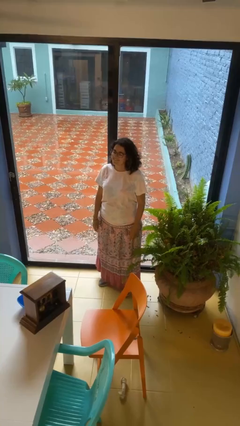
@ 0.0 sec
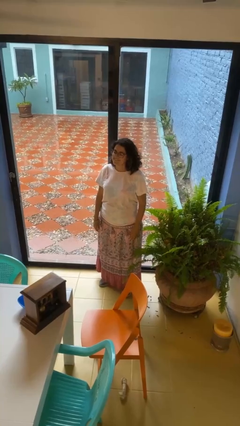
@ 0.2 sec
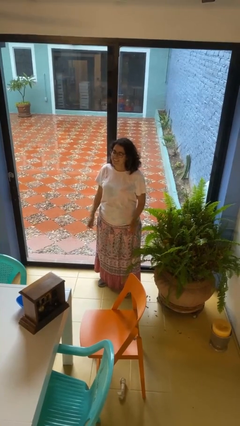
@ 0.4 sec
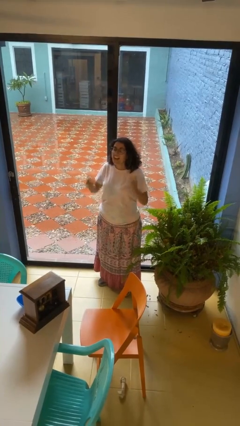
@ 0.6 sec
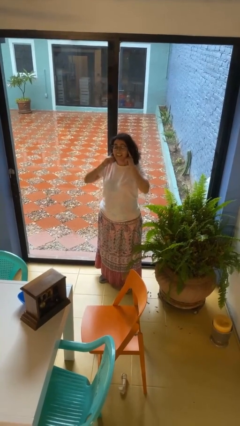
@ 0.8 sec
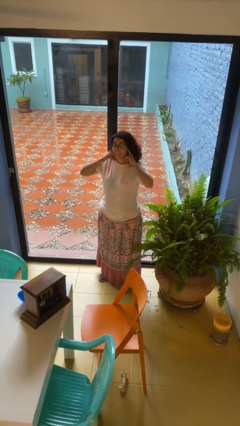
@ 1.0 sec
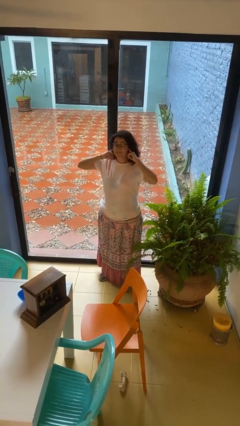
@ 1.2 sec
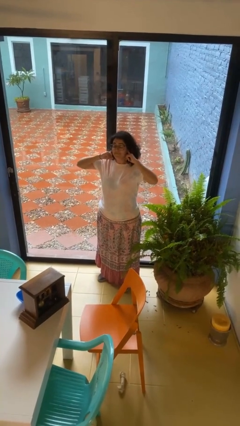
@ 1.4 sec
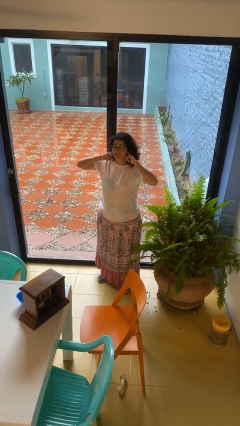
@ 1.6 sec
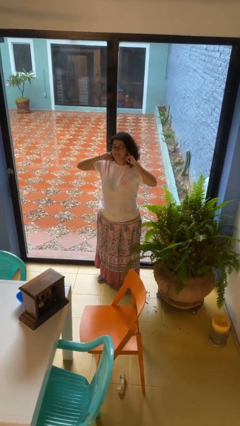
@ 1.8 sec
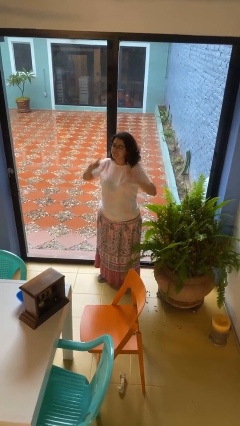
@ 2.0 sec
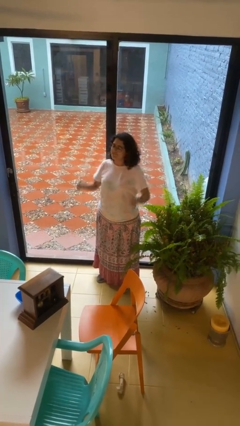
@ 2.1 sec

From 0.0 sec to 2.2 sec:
person puts fingers in ear

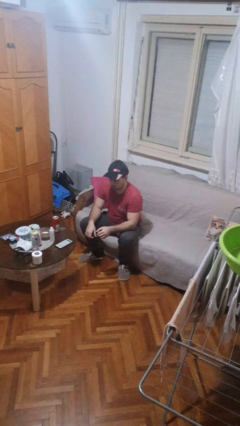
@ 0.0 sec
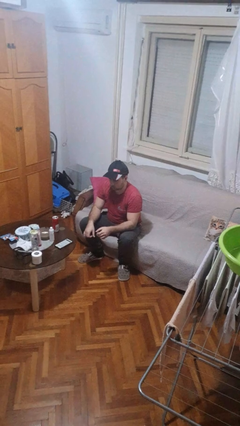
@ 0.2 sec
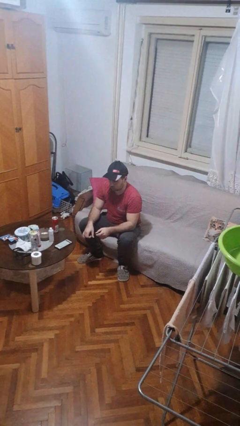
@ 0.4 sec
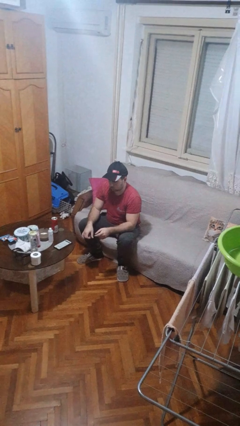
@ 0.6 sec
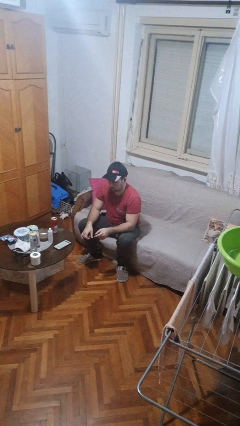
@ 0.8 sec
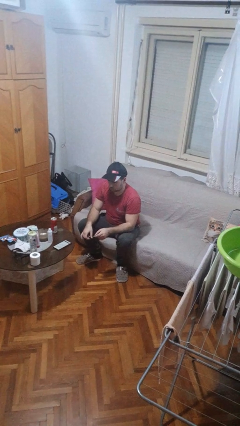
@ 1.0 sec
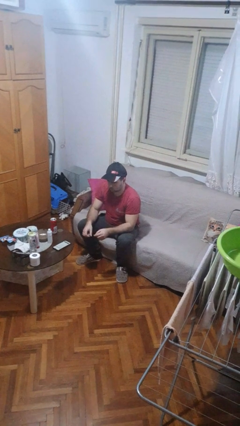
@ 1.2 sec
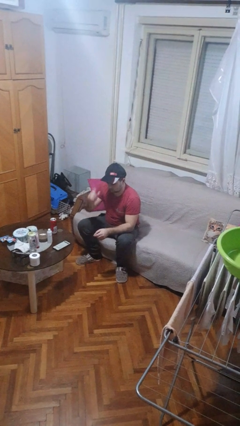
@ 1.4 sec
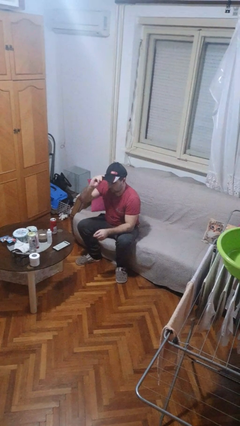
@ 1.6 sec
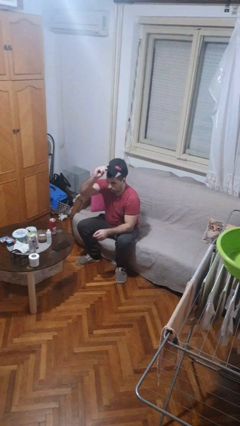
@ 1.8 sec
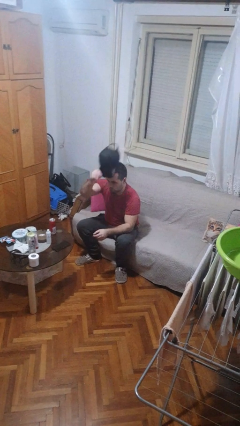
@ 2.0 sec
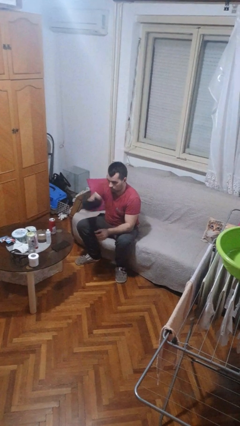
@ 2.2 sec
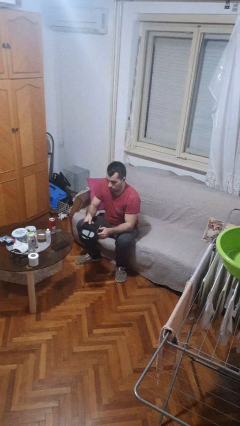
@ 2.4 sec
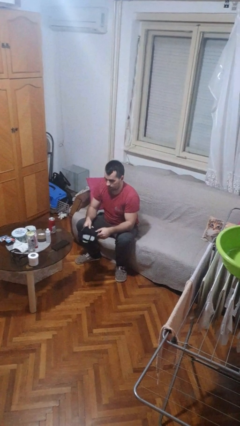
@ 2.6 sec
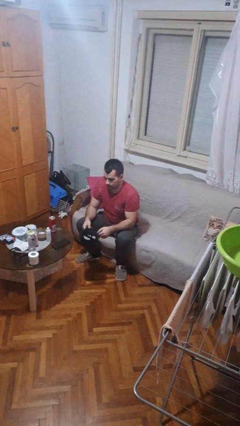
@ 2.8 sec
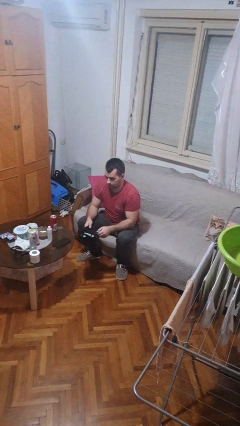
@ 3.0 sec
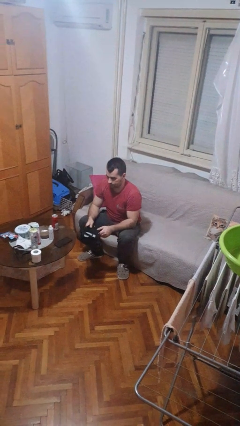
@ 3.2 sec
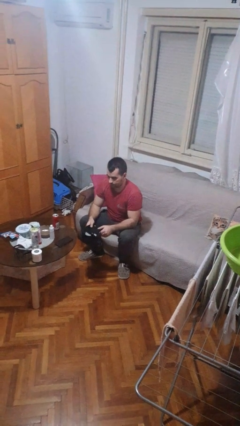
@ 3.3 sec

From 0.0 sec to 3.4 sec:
person takes off hat

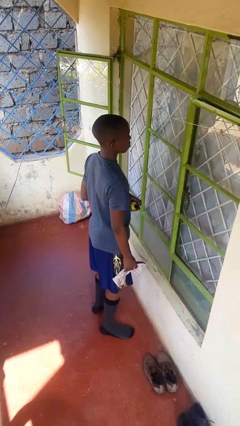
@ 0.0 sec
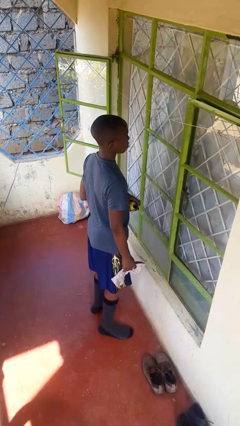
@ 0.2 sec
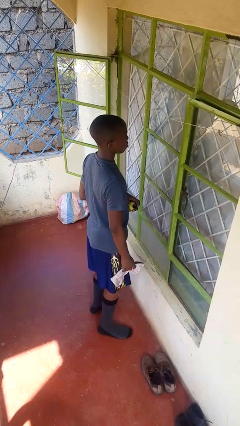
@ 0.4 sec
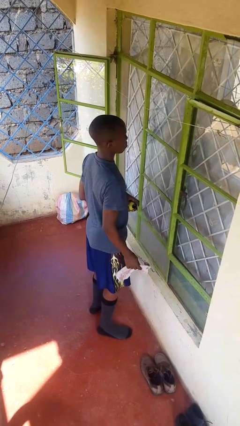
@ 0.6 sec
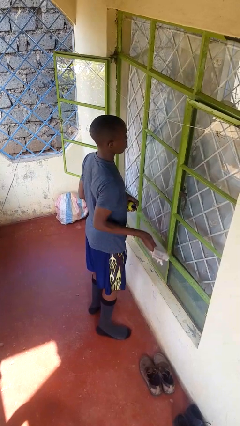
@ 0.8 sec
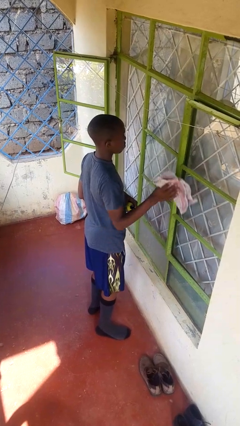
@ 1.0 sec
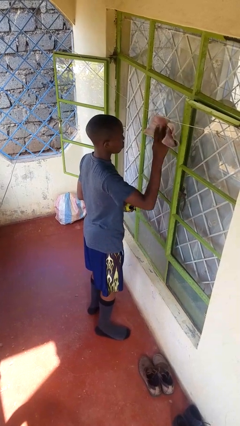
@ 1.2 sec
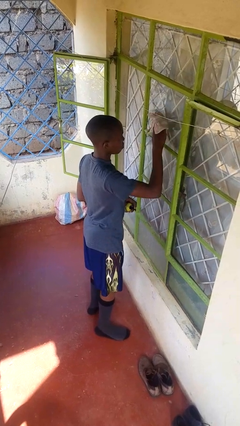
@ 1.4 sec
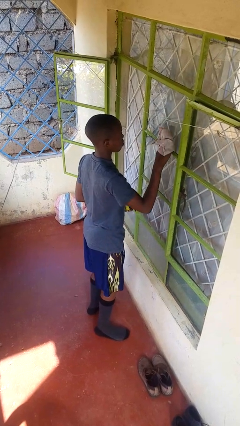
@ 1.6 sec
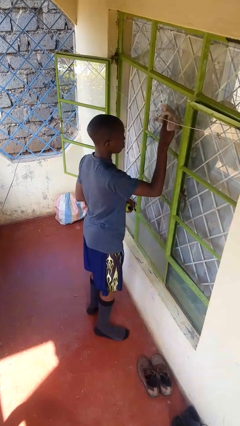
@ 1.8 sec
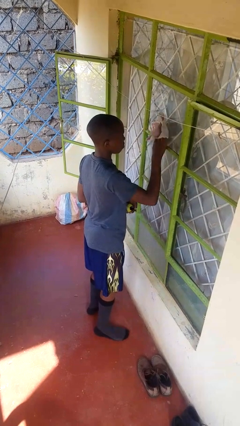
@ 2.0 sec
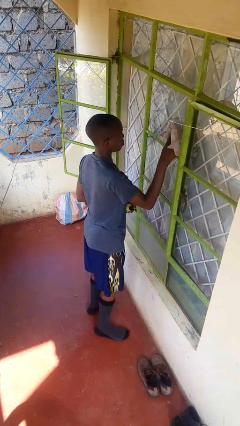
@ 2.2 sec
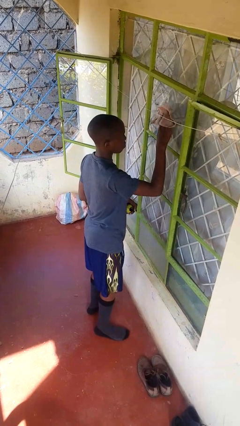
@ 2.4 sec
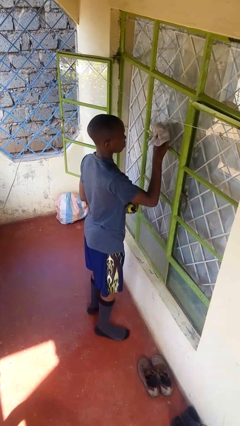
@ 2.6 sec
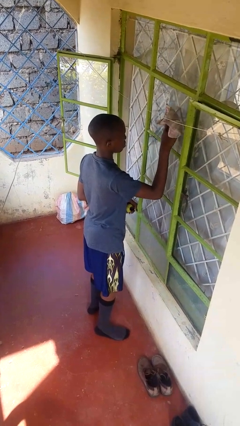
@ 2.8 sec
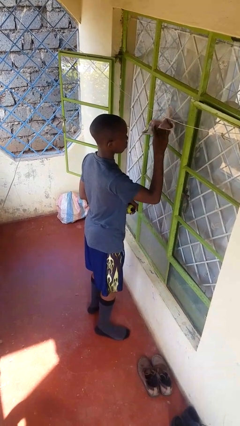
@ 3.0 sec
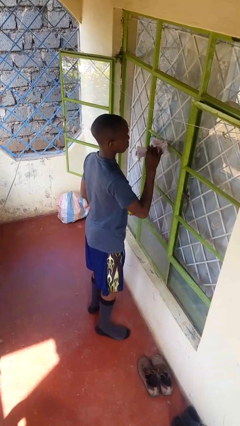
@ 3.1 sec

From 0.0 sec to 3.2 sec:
person washes window

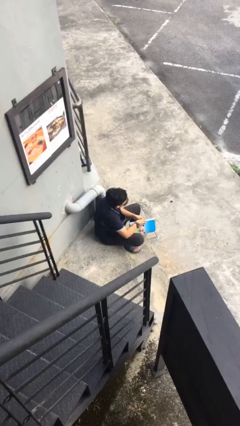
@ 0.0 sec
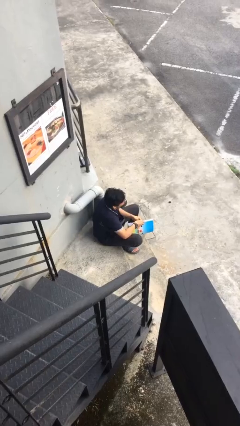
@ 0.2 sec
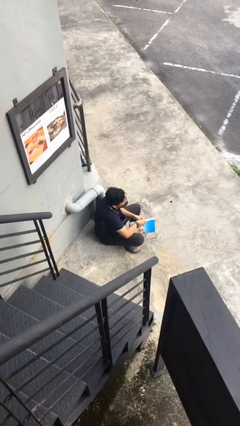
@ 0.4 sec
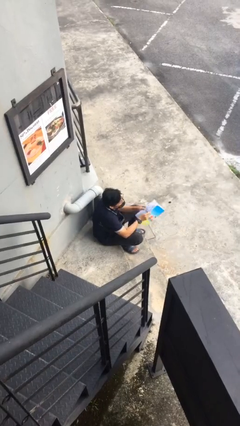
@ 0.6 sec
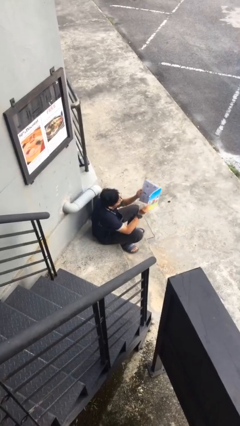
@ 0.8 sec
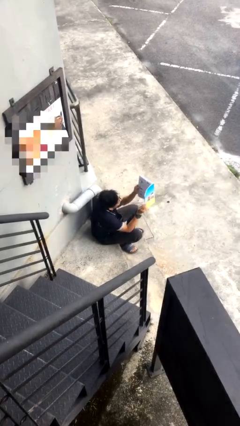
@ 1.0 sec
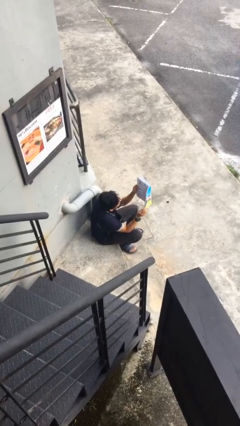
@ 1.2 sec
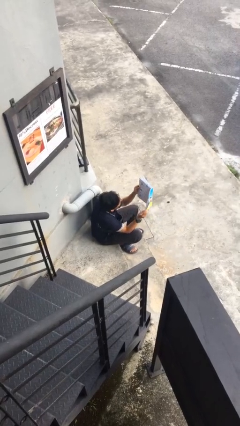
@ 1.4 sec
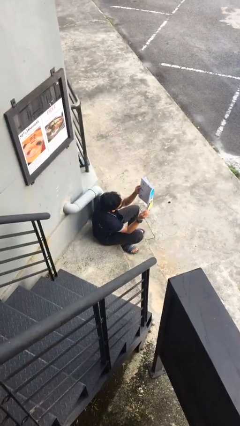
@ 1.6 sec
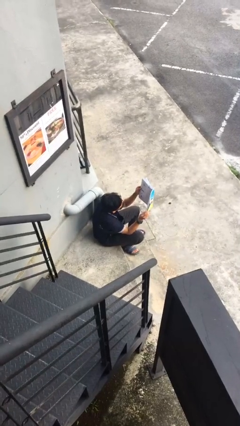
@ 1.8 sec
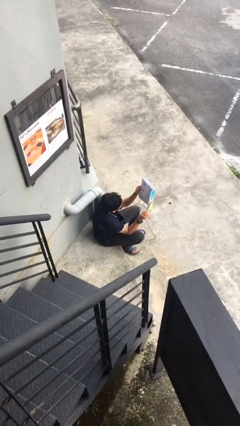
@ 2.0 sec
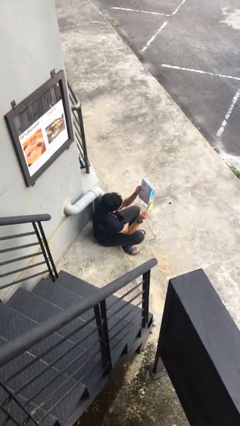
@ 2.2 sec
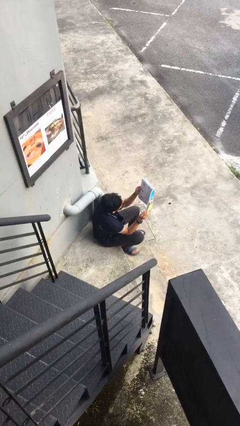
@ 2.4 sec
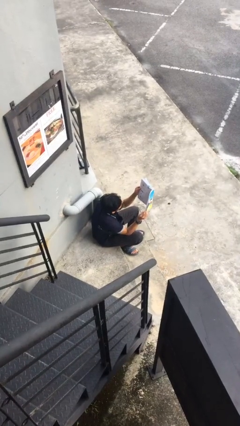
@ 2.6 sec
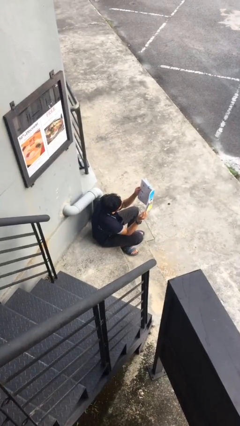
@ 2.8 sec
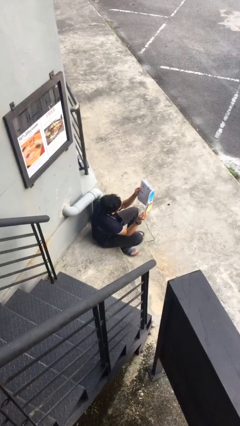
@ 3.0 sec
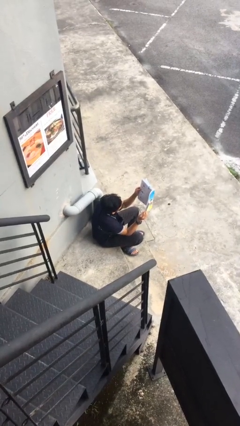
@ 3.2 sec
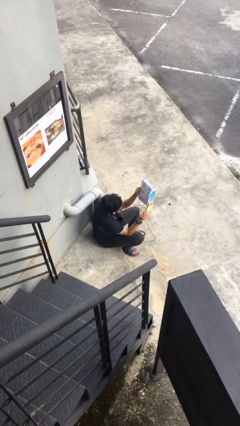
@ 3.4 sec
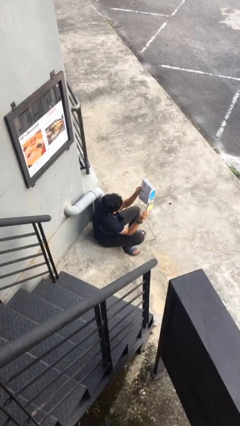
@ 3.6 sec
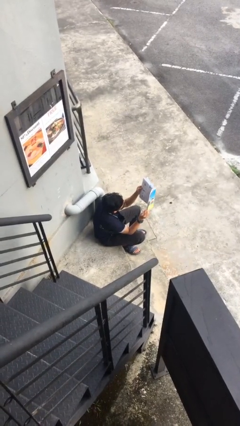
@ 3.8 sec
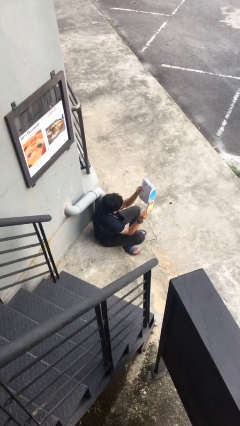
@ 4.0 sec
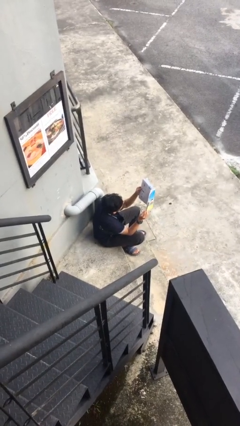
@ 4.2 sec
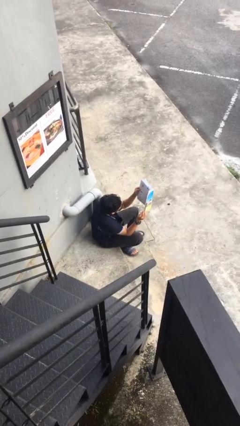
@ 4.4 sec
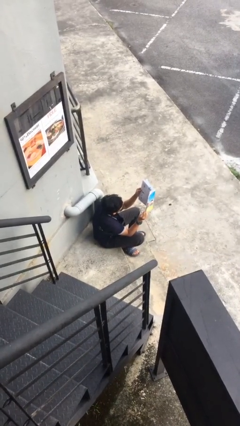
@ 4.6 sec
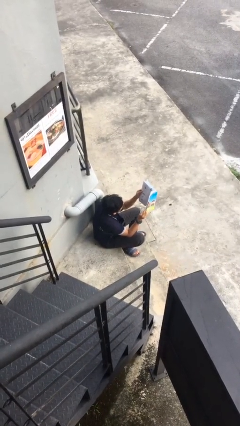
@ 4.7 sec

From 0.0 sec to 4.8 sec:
person reads document

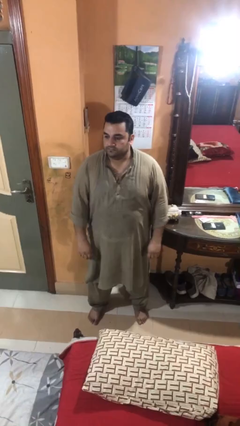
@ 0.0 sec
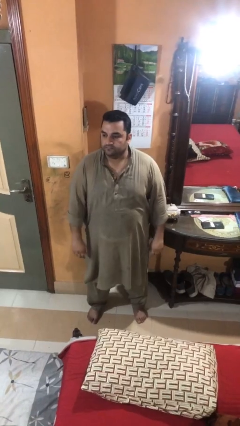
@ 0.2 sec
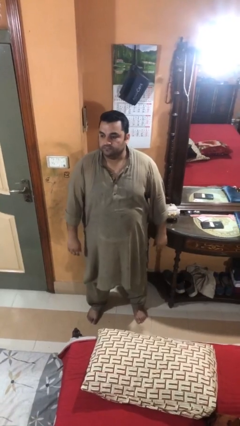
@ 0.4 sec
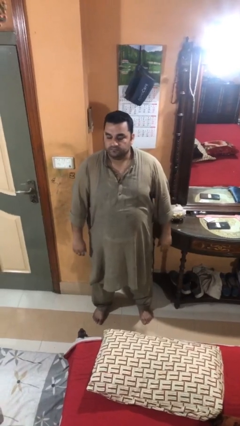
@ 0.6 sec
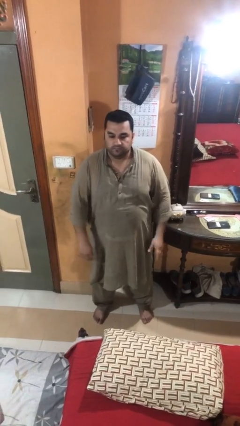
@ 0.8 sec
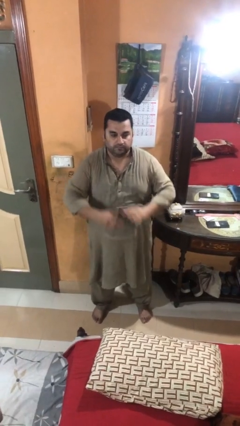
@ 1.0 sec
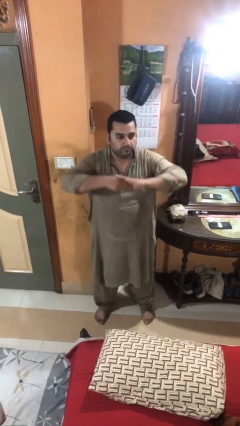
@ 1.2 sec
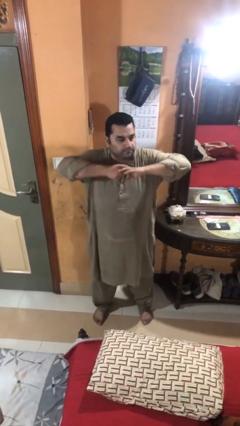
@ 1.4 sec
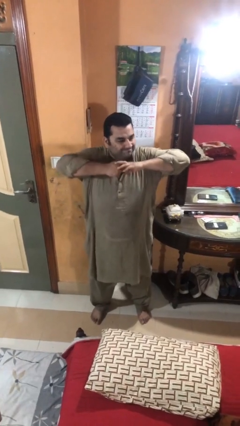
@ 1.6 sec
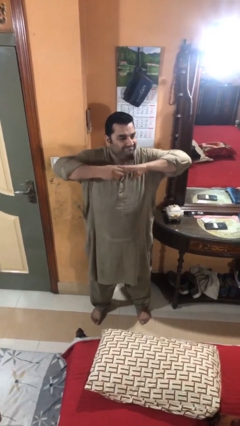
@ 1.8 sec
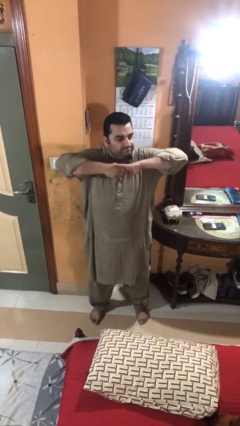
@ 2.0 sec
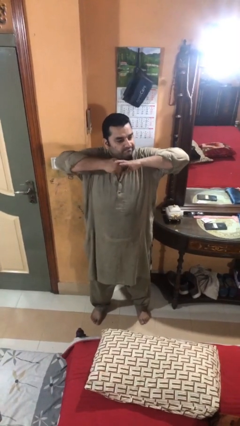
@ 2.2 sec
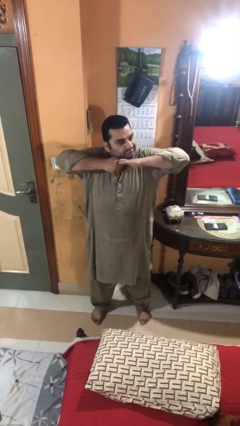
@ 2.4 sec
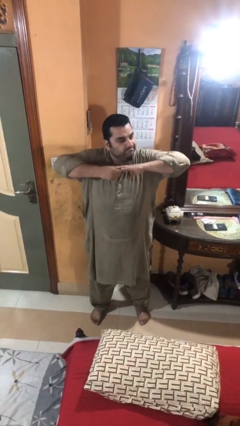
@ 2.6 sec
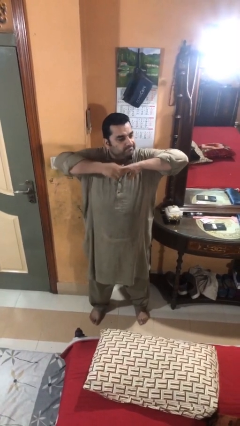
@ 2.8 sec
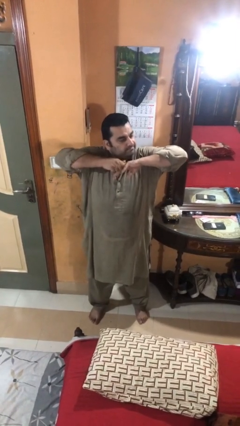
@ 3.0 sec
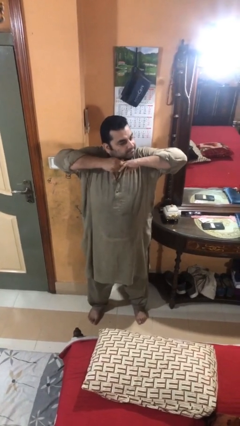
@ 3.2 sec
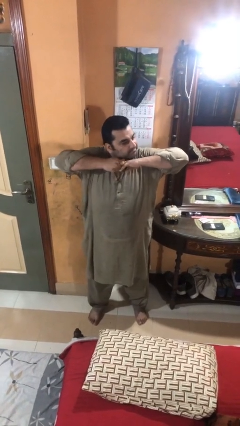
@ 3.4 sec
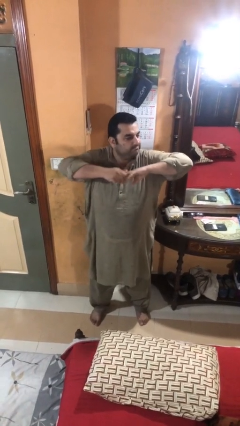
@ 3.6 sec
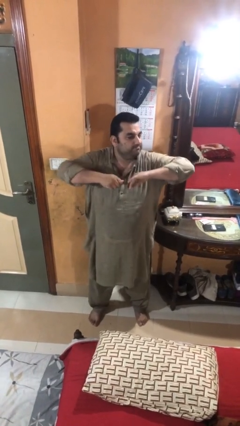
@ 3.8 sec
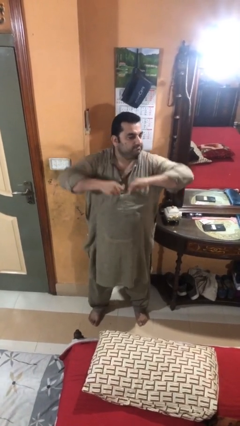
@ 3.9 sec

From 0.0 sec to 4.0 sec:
person cracks knuckles
